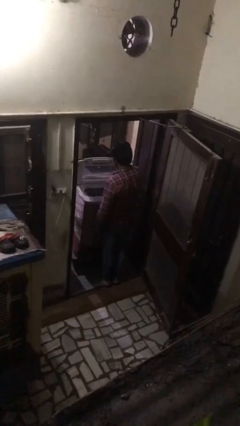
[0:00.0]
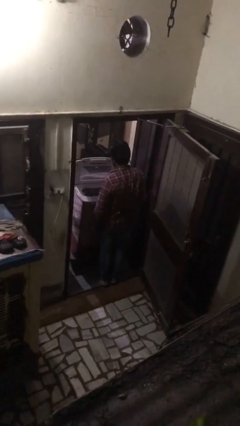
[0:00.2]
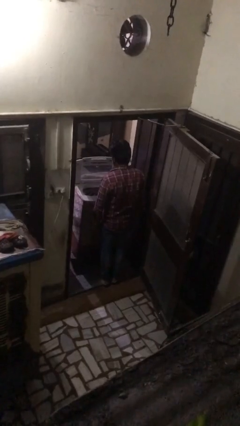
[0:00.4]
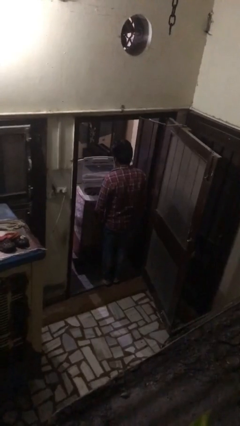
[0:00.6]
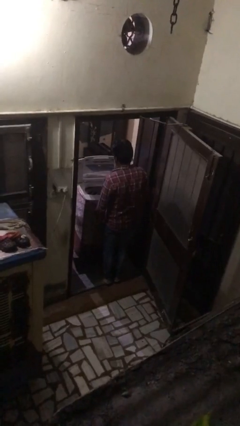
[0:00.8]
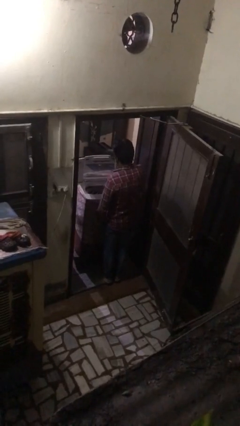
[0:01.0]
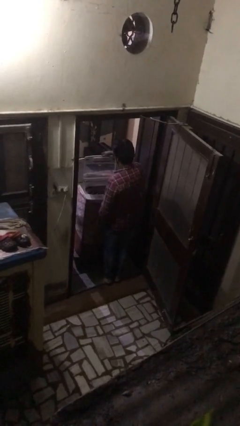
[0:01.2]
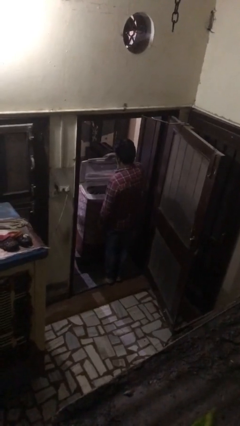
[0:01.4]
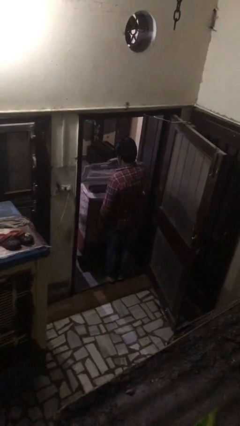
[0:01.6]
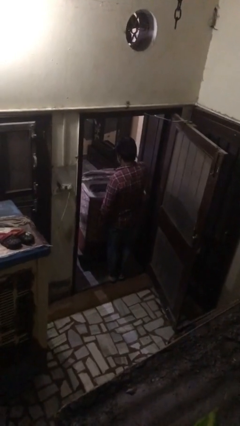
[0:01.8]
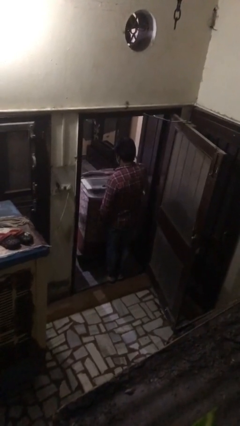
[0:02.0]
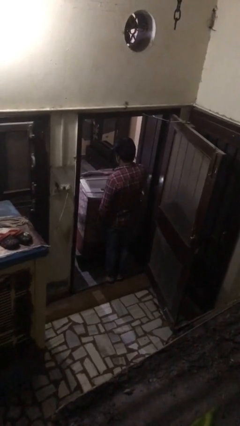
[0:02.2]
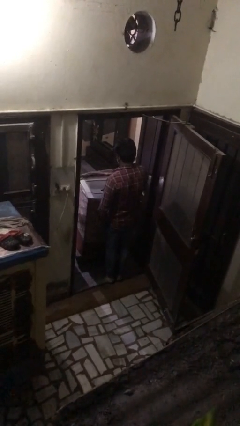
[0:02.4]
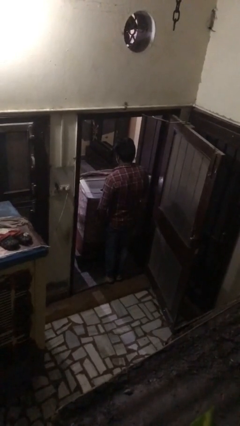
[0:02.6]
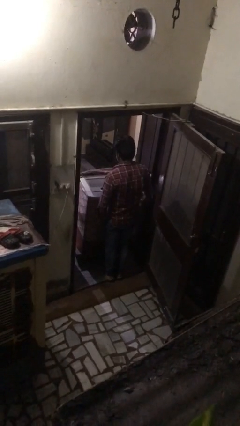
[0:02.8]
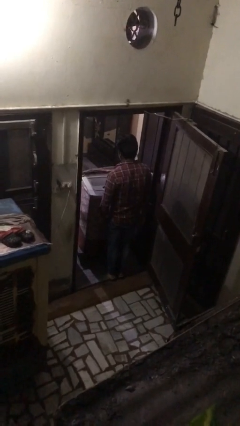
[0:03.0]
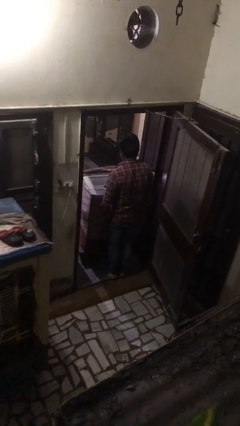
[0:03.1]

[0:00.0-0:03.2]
person closes clothes washer

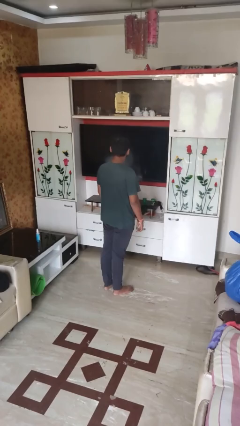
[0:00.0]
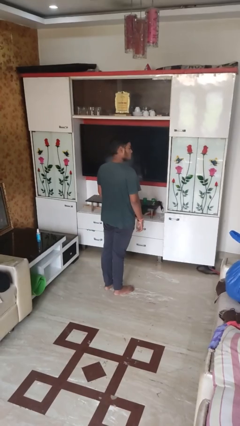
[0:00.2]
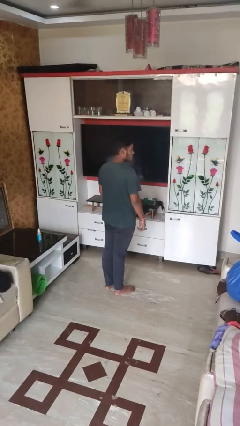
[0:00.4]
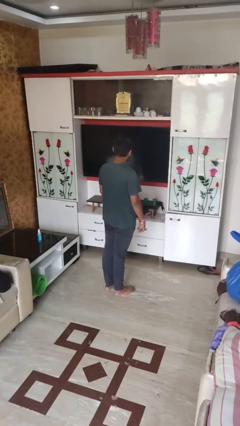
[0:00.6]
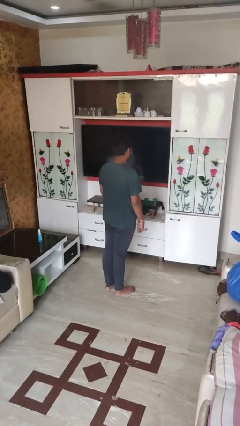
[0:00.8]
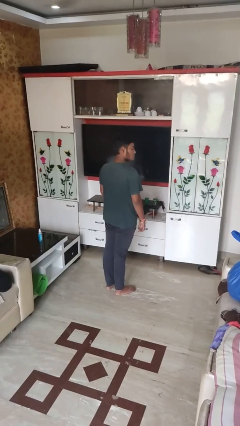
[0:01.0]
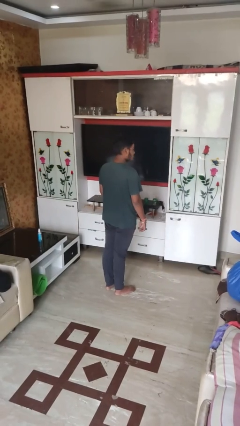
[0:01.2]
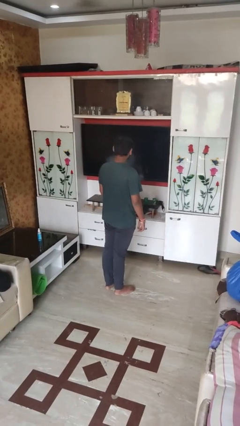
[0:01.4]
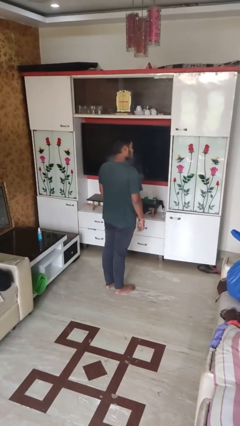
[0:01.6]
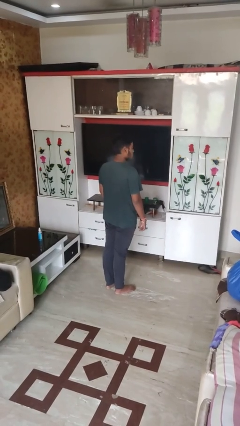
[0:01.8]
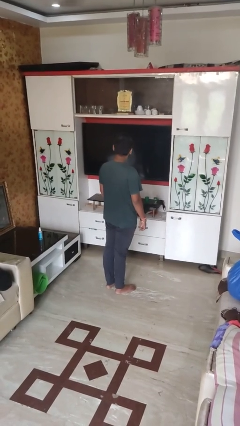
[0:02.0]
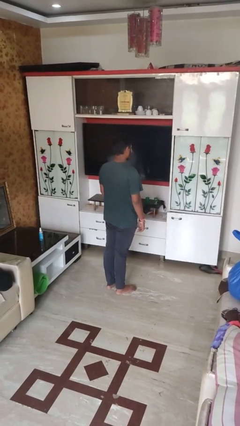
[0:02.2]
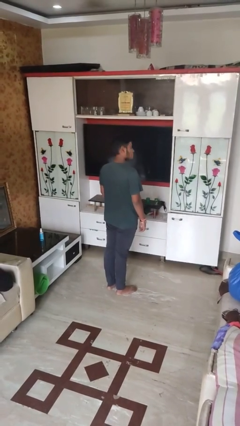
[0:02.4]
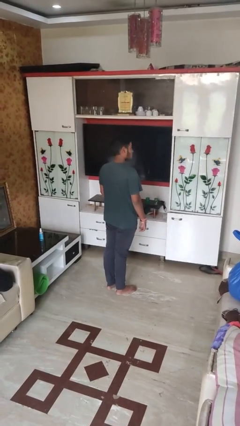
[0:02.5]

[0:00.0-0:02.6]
person shakes head

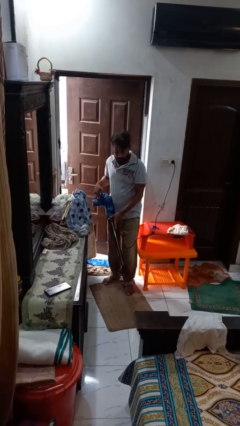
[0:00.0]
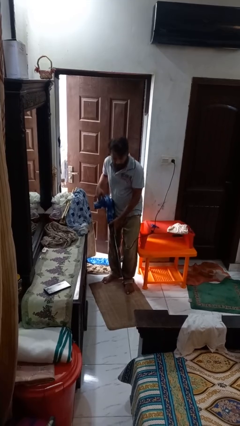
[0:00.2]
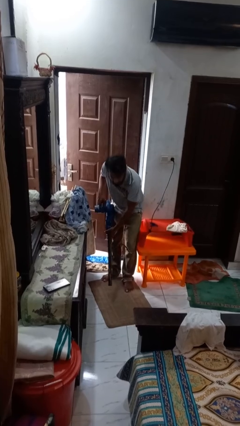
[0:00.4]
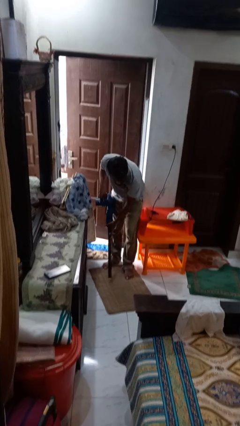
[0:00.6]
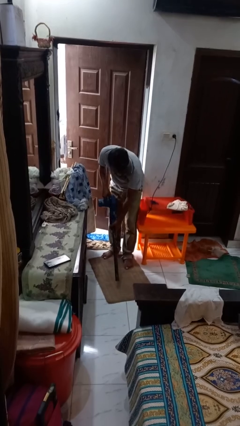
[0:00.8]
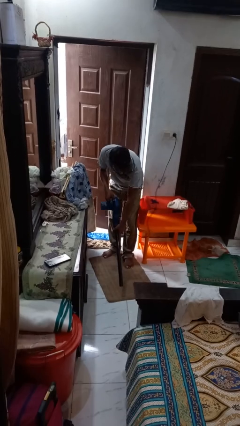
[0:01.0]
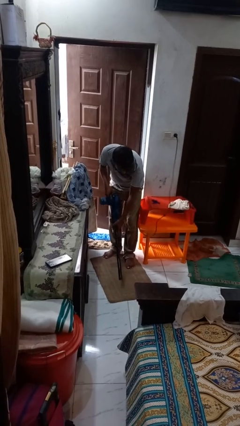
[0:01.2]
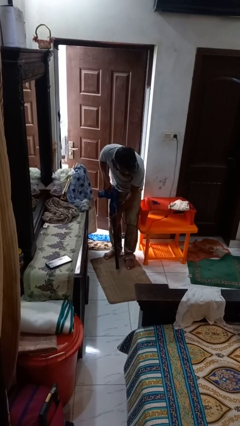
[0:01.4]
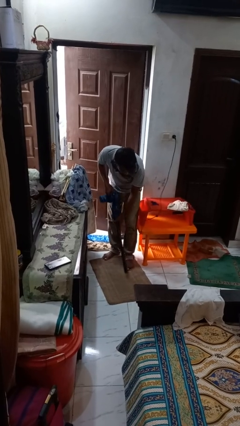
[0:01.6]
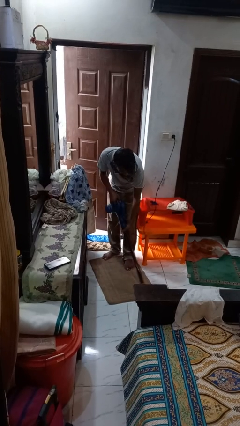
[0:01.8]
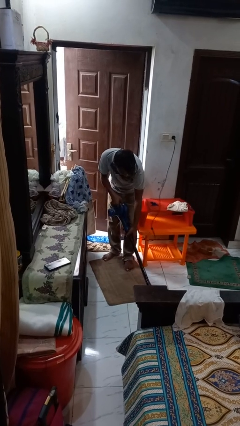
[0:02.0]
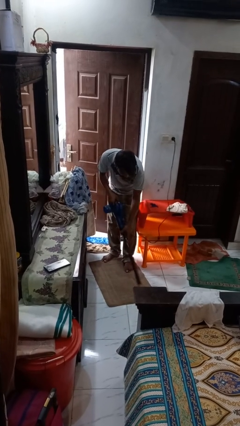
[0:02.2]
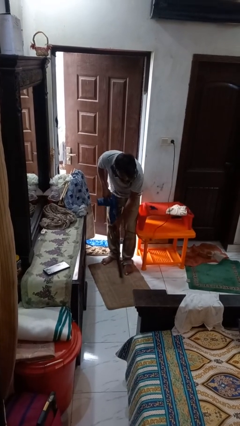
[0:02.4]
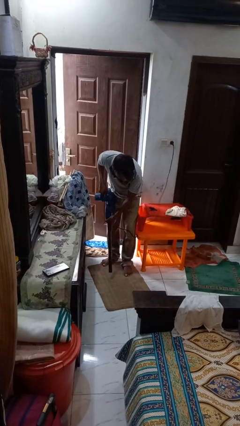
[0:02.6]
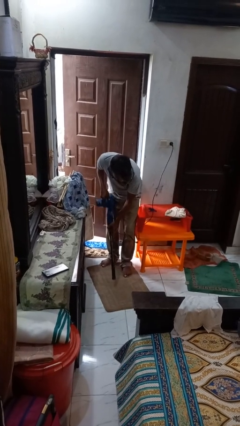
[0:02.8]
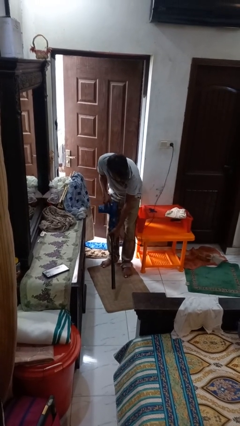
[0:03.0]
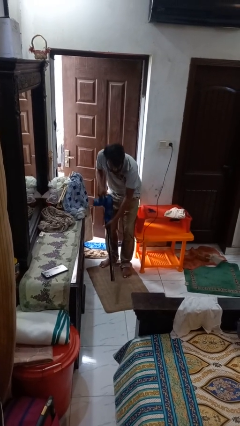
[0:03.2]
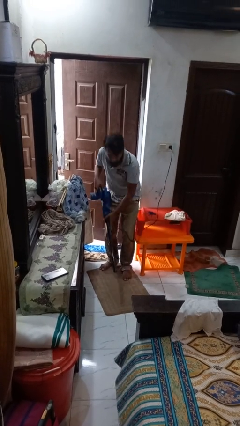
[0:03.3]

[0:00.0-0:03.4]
person vacuums carpet

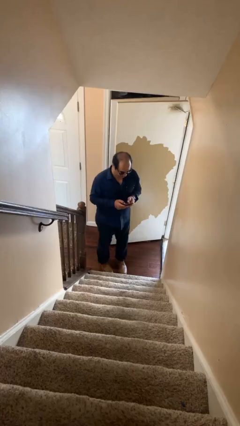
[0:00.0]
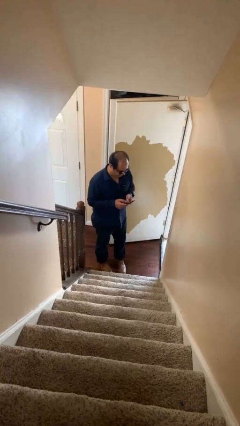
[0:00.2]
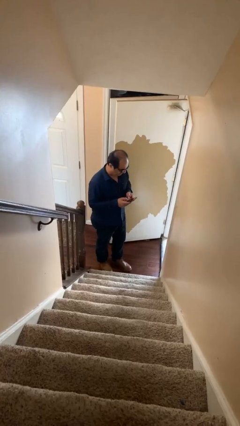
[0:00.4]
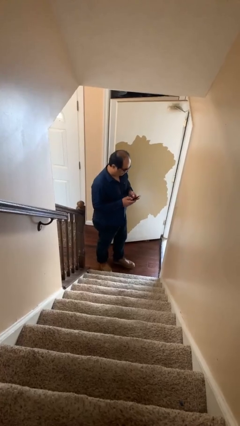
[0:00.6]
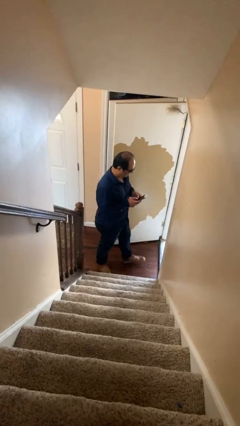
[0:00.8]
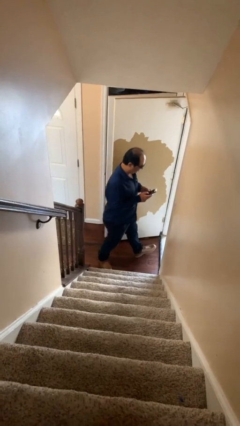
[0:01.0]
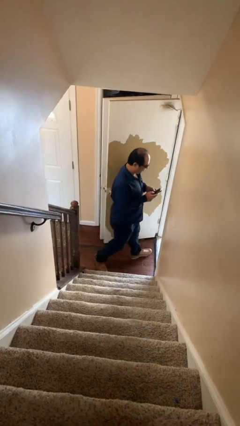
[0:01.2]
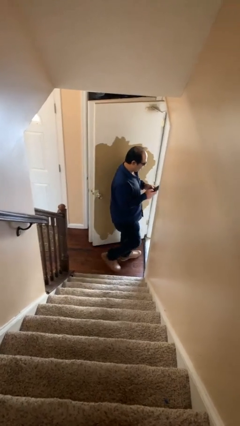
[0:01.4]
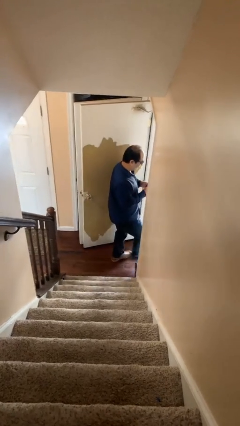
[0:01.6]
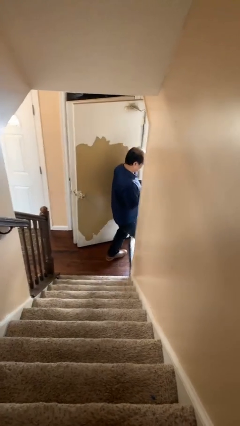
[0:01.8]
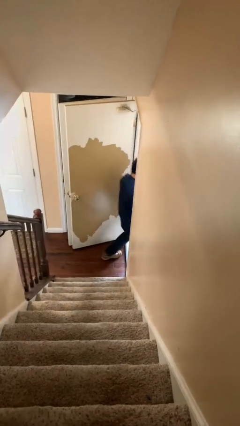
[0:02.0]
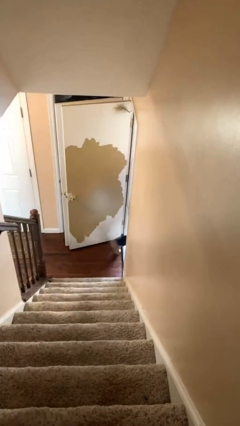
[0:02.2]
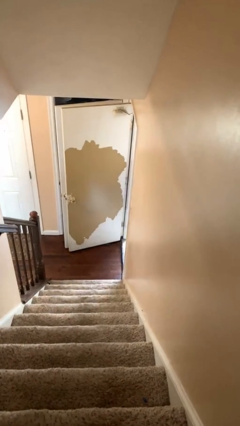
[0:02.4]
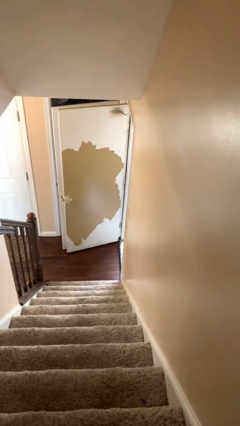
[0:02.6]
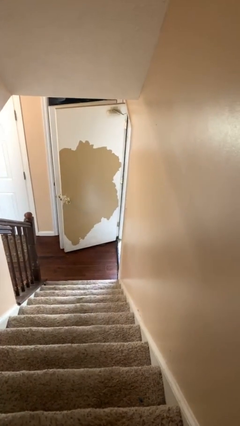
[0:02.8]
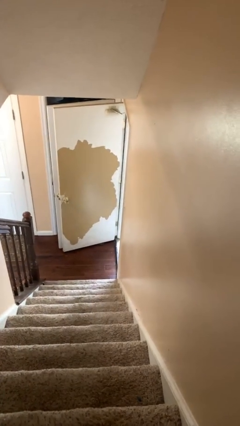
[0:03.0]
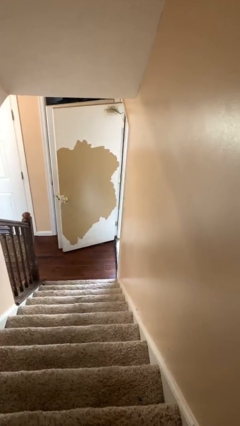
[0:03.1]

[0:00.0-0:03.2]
person exits scene through structure

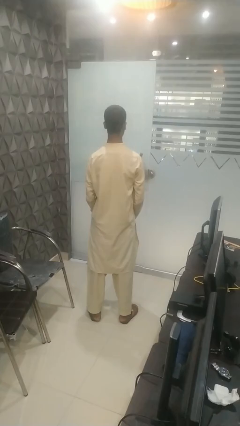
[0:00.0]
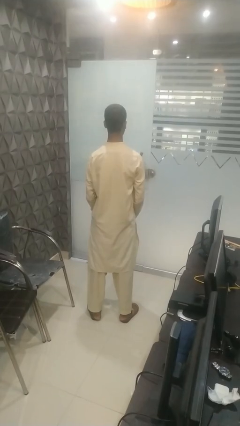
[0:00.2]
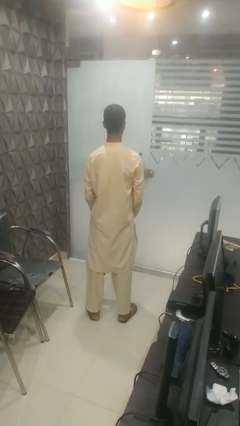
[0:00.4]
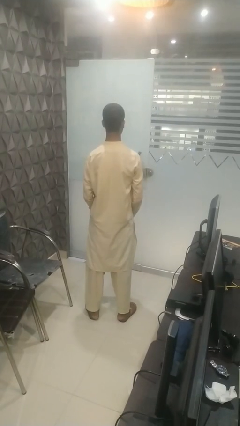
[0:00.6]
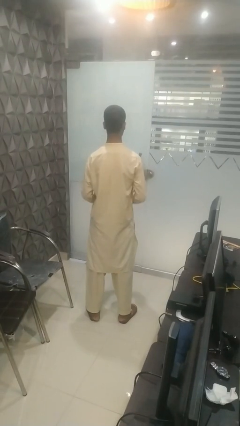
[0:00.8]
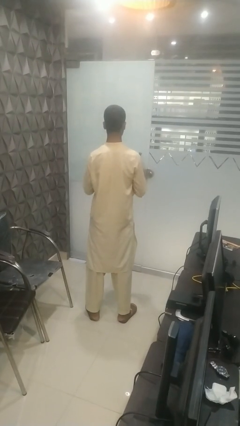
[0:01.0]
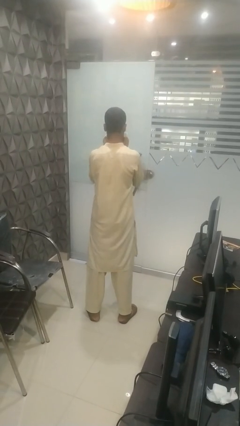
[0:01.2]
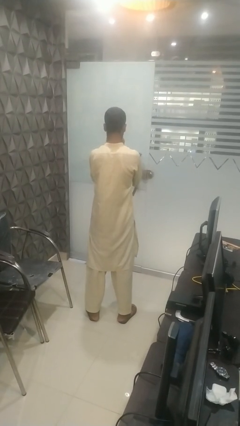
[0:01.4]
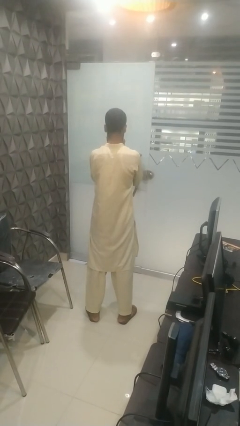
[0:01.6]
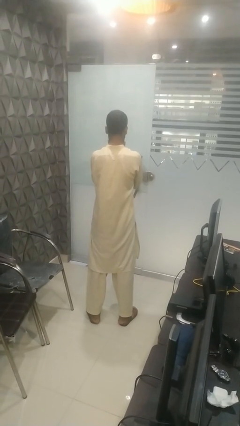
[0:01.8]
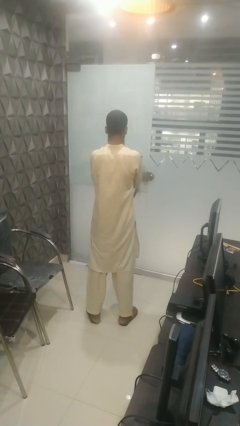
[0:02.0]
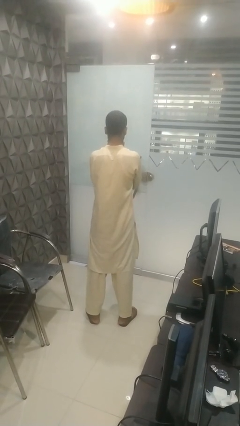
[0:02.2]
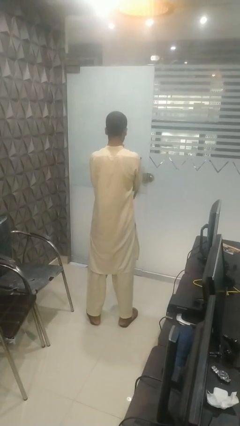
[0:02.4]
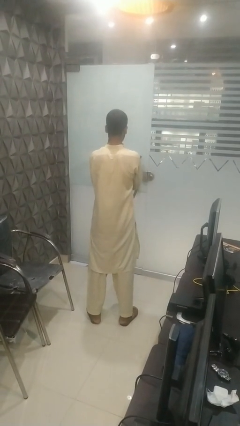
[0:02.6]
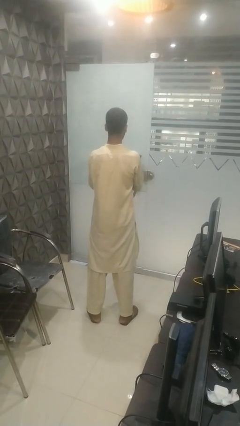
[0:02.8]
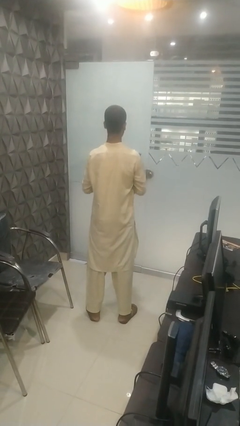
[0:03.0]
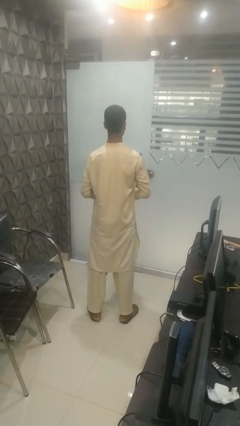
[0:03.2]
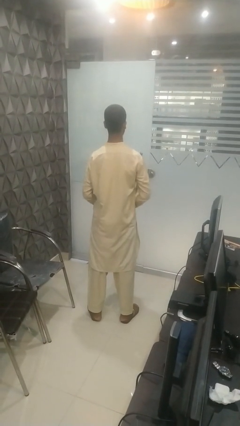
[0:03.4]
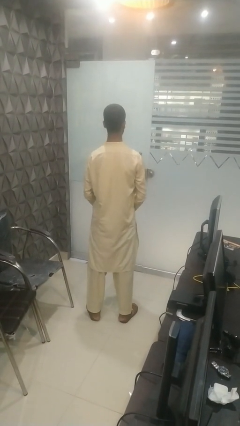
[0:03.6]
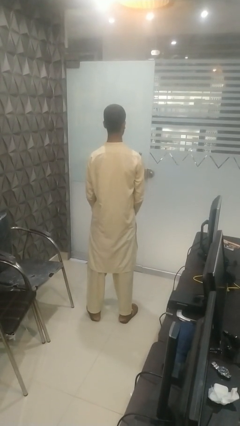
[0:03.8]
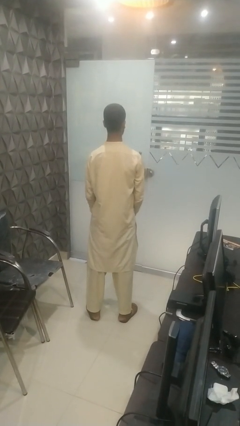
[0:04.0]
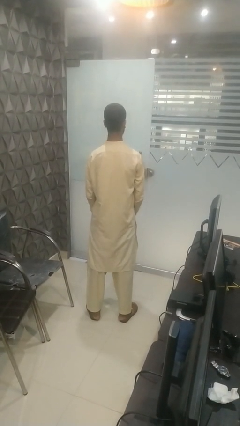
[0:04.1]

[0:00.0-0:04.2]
person blows nose

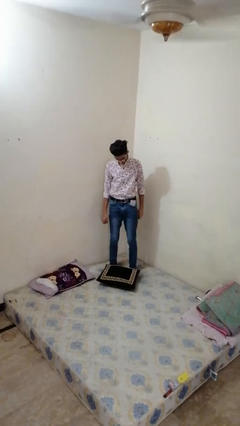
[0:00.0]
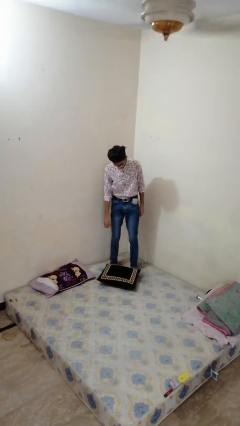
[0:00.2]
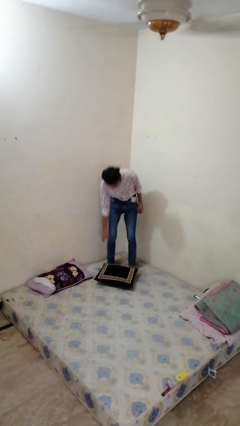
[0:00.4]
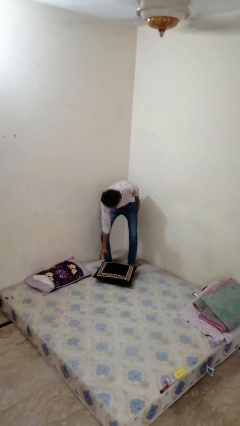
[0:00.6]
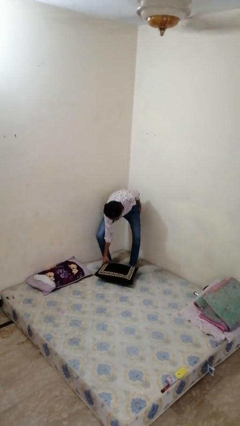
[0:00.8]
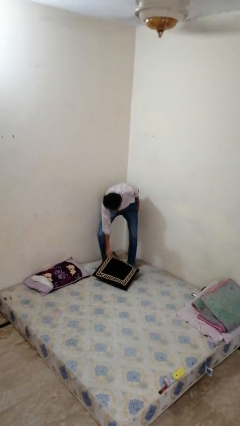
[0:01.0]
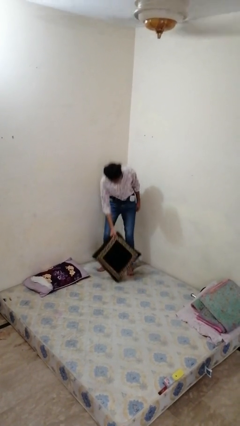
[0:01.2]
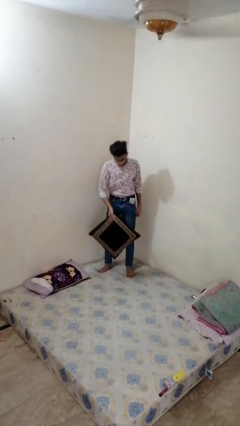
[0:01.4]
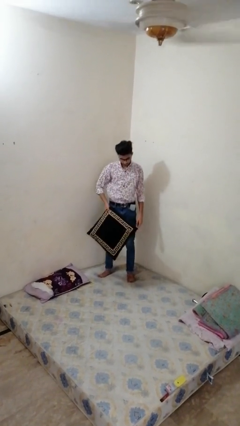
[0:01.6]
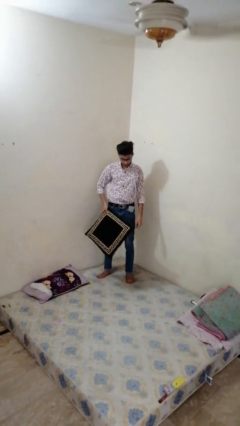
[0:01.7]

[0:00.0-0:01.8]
person picks up object from bed
